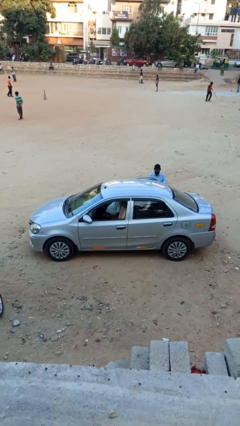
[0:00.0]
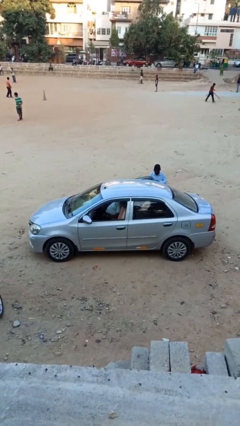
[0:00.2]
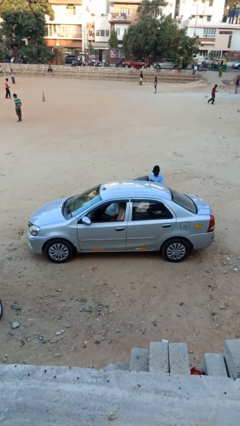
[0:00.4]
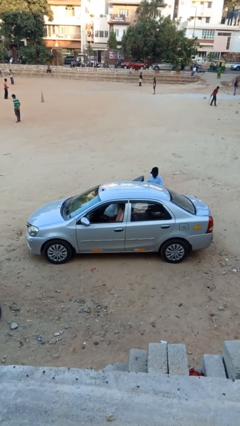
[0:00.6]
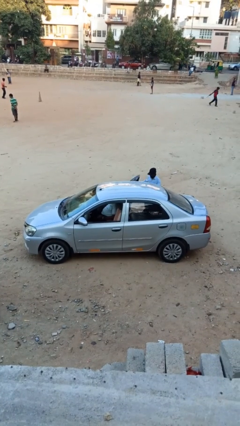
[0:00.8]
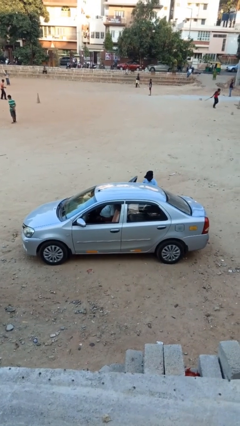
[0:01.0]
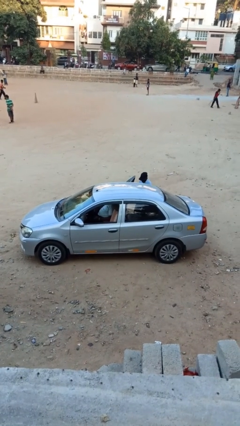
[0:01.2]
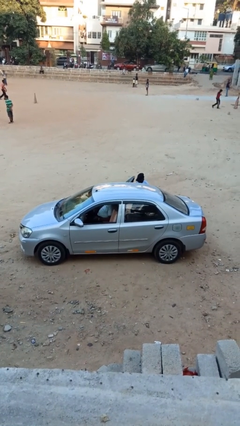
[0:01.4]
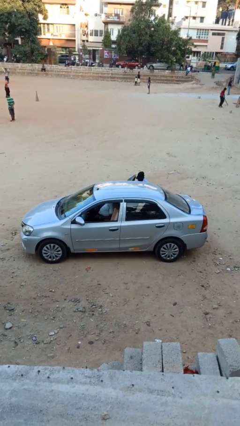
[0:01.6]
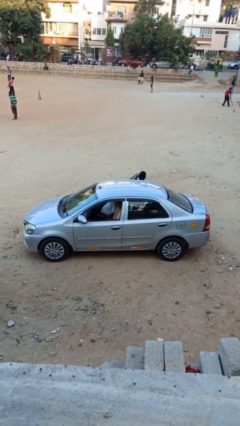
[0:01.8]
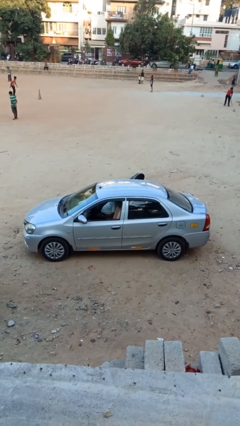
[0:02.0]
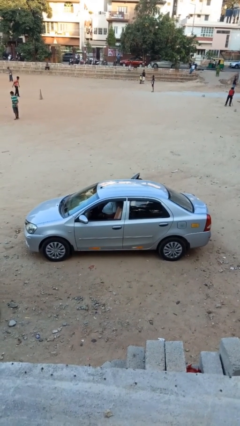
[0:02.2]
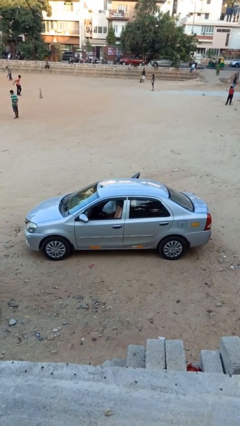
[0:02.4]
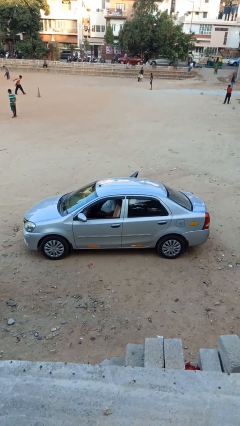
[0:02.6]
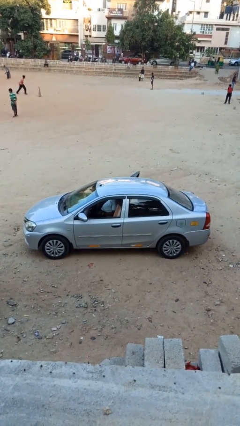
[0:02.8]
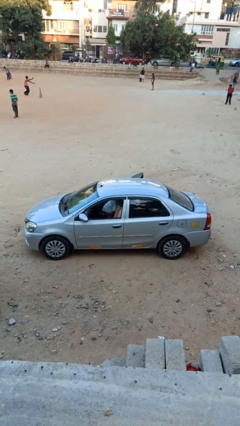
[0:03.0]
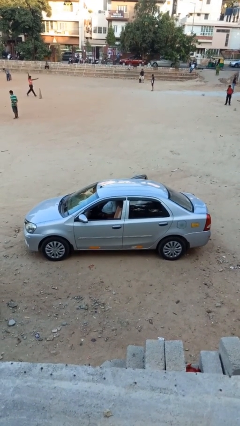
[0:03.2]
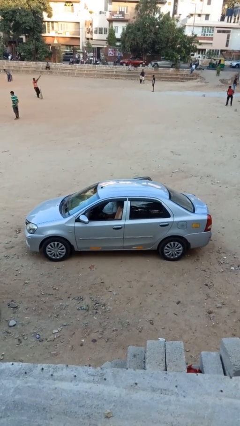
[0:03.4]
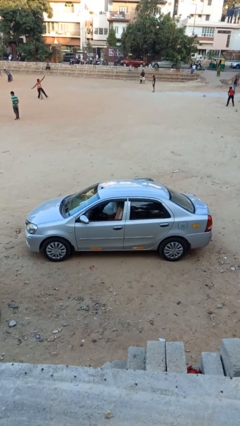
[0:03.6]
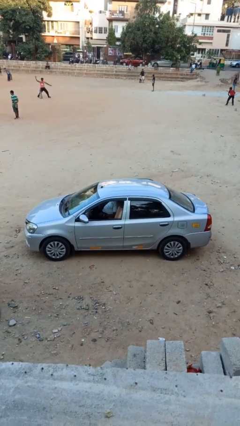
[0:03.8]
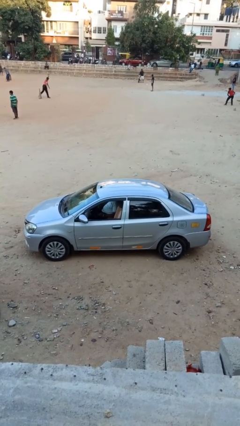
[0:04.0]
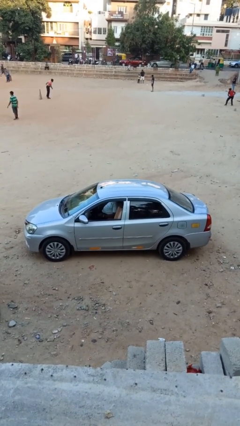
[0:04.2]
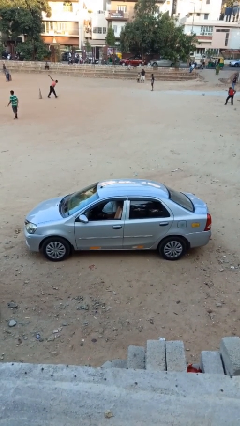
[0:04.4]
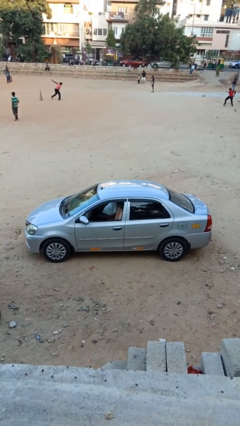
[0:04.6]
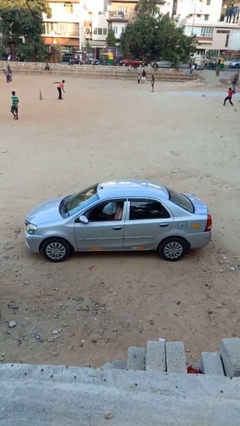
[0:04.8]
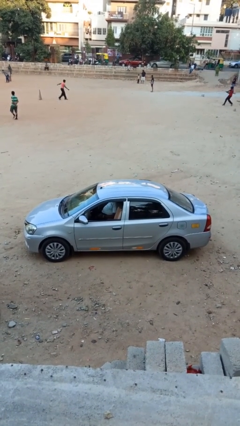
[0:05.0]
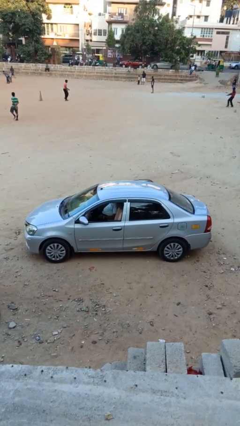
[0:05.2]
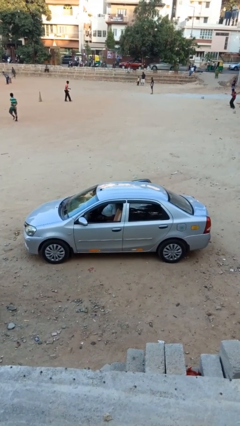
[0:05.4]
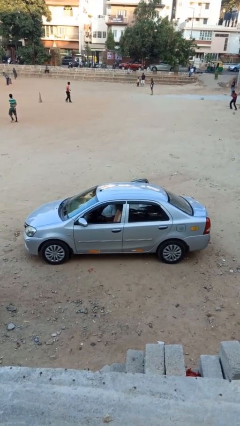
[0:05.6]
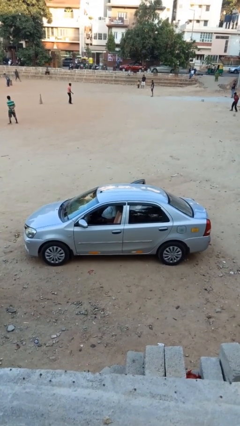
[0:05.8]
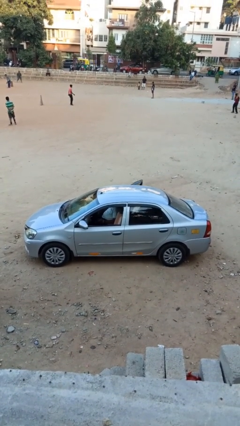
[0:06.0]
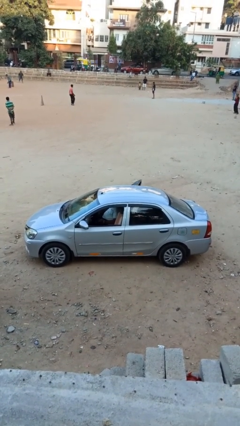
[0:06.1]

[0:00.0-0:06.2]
car picks up person

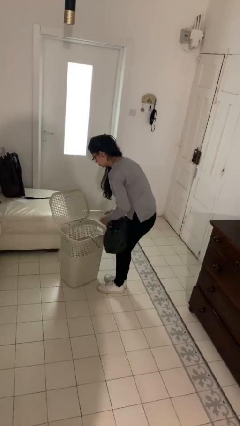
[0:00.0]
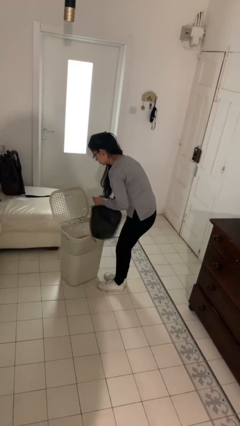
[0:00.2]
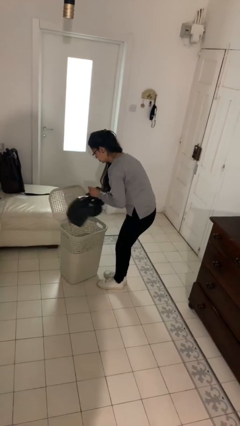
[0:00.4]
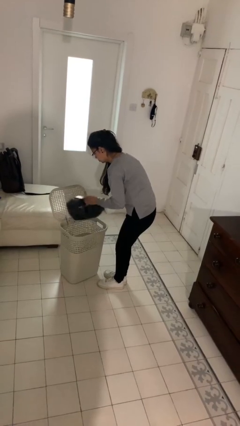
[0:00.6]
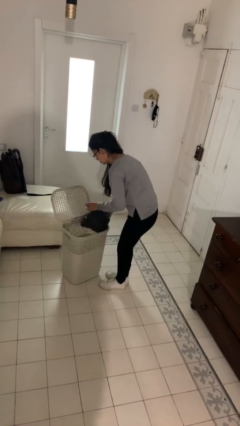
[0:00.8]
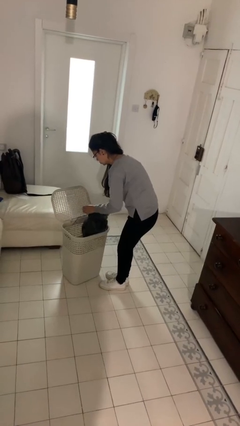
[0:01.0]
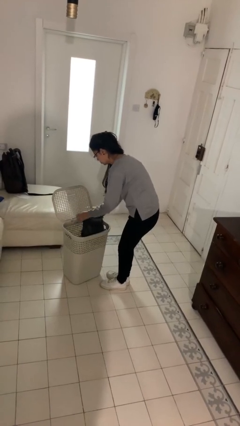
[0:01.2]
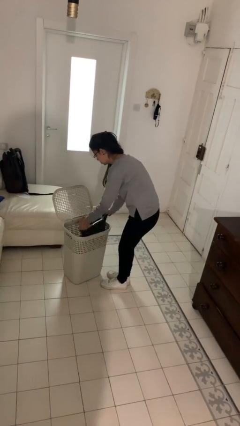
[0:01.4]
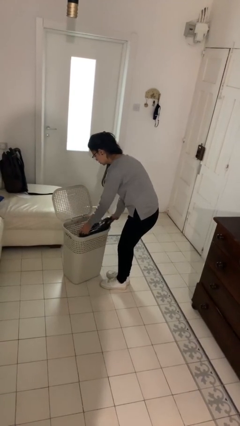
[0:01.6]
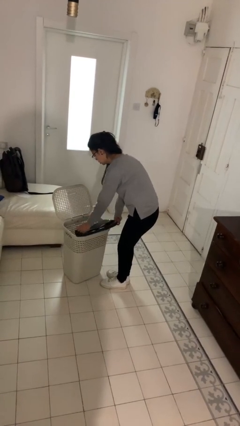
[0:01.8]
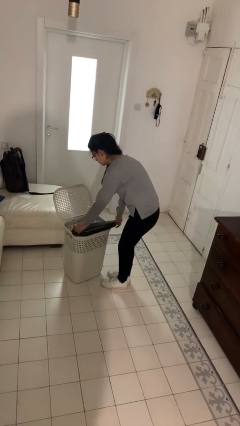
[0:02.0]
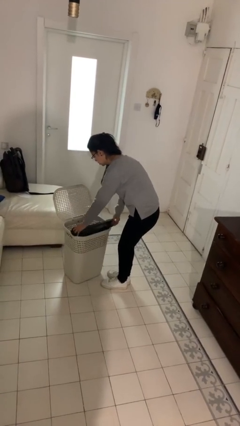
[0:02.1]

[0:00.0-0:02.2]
person inserts trashbag into trashcan

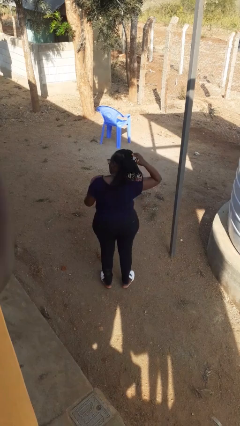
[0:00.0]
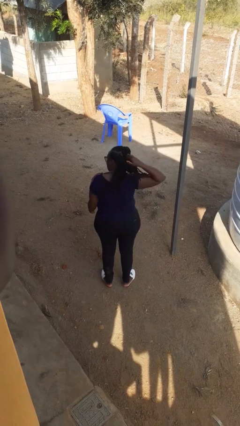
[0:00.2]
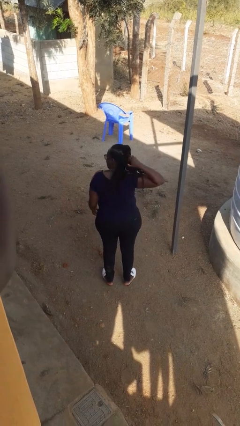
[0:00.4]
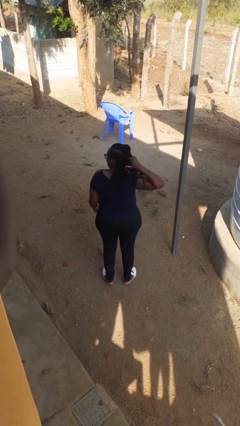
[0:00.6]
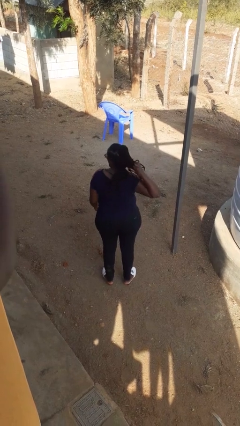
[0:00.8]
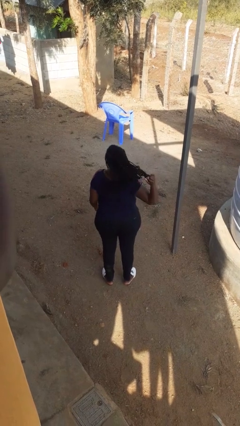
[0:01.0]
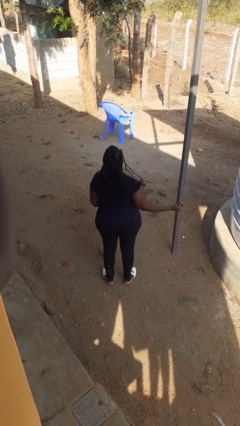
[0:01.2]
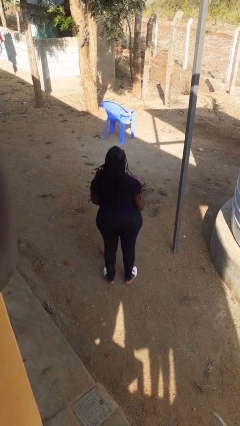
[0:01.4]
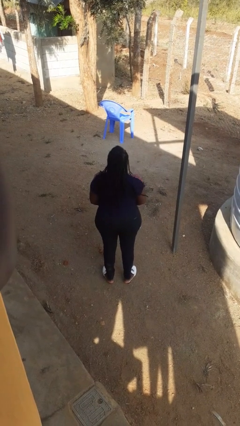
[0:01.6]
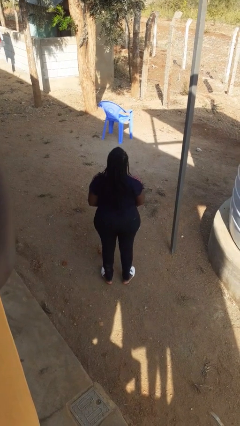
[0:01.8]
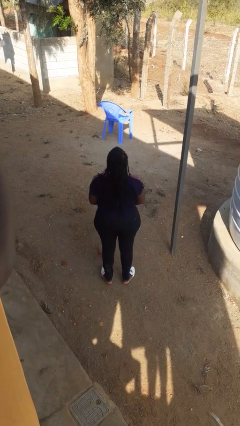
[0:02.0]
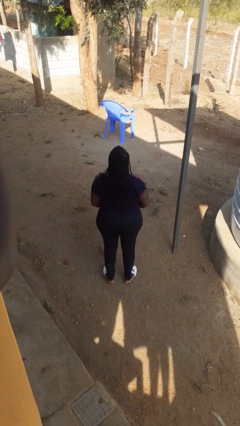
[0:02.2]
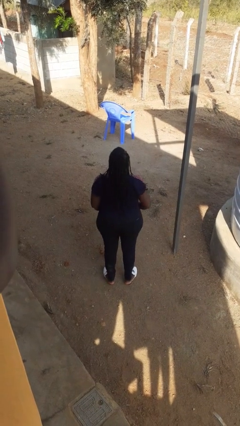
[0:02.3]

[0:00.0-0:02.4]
person puts hair in ponytail

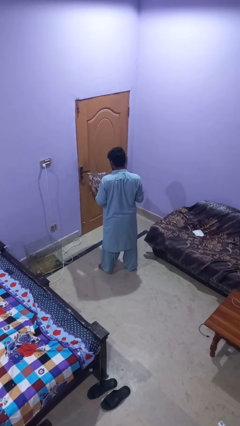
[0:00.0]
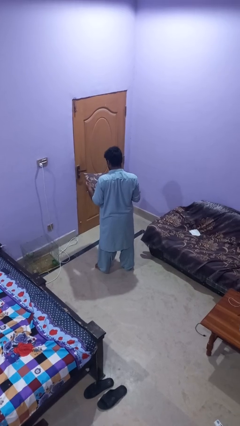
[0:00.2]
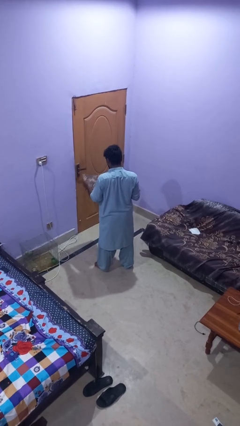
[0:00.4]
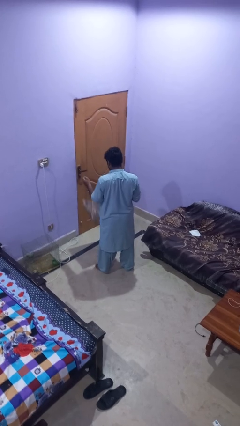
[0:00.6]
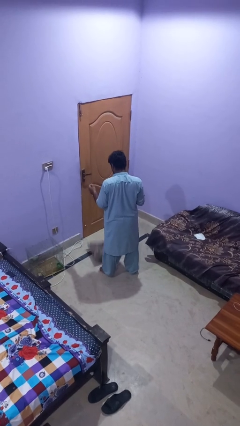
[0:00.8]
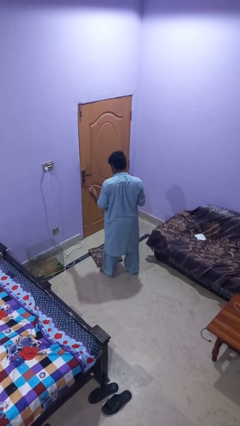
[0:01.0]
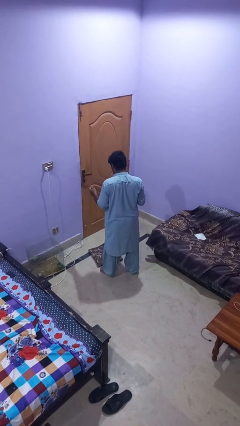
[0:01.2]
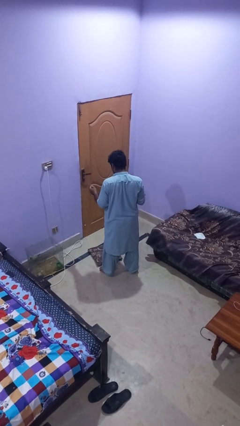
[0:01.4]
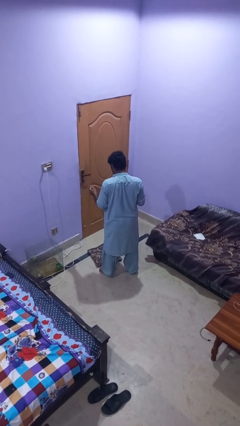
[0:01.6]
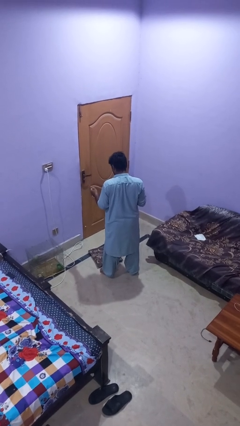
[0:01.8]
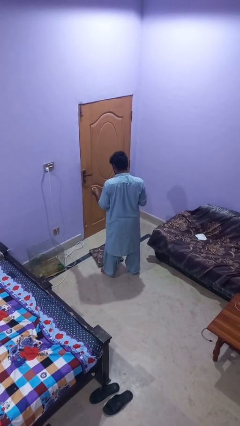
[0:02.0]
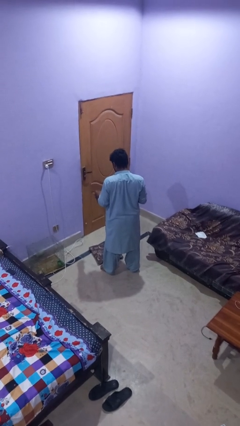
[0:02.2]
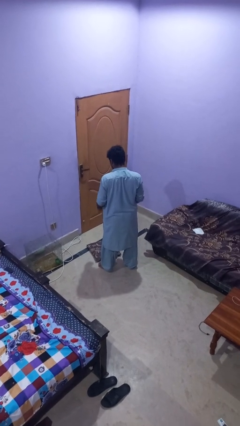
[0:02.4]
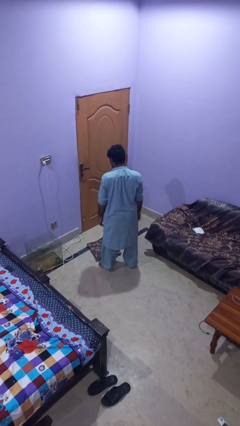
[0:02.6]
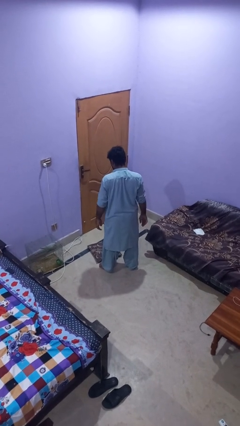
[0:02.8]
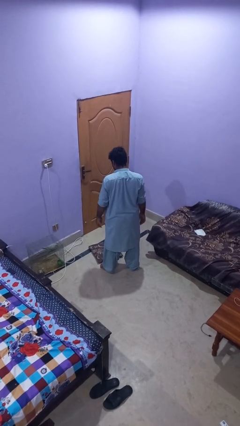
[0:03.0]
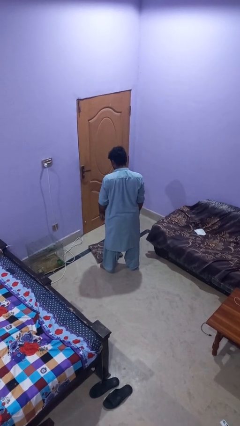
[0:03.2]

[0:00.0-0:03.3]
person drops object

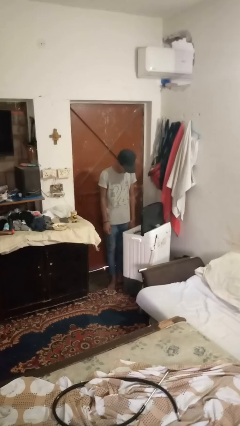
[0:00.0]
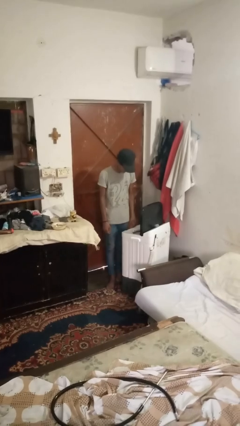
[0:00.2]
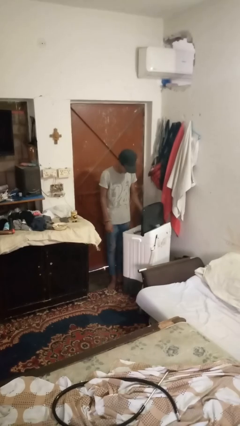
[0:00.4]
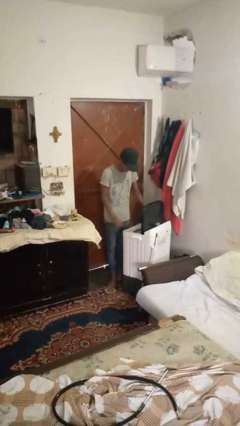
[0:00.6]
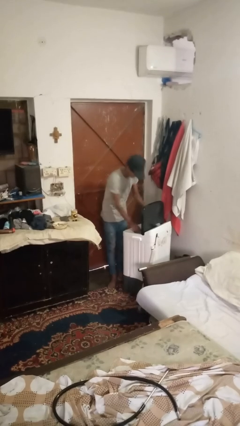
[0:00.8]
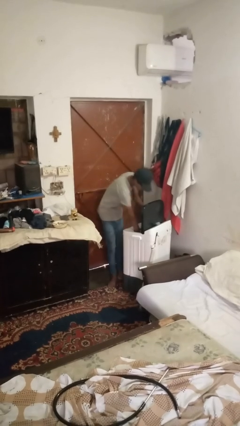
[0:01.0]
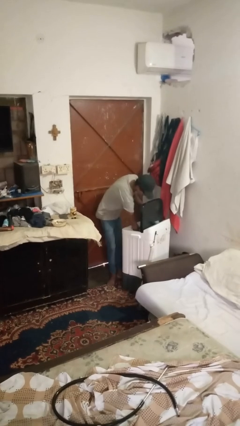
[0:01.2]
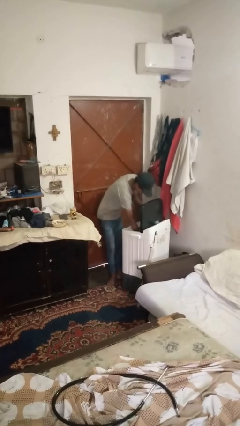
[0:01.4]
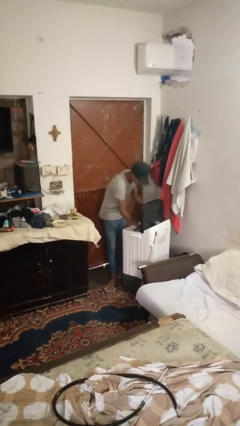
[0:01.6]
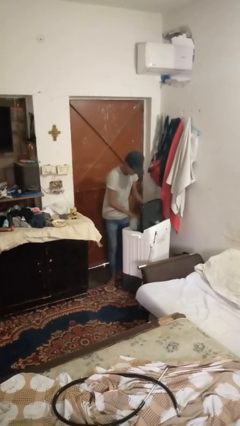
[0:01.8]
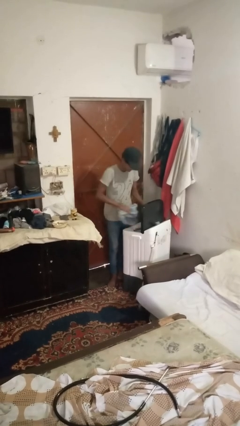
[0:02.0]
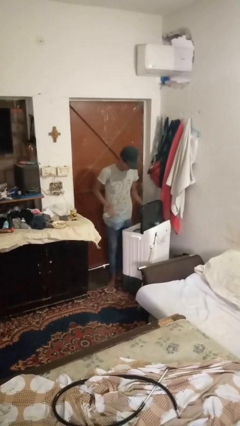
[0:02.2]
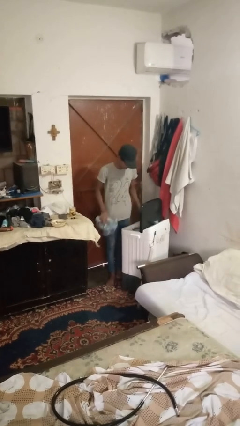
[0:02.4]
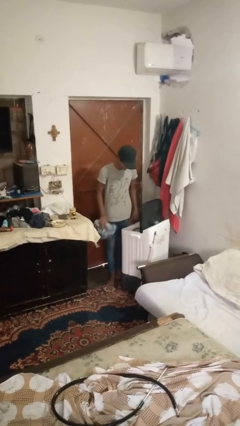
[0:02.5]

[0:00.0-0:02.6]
person unloads clotheswasher

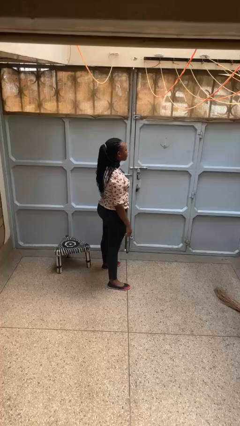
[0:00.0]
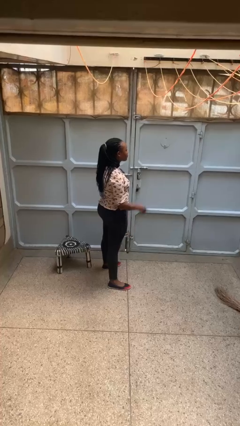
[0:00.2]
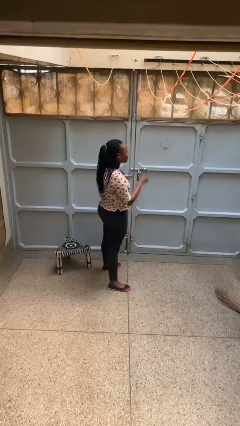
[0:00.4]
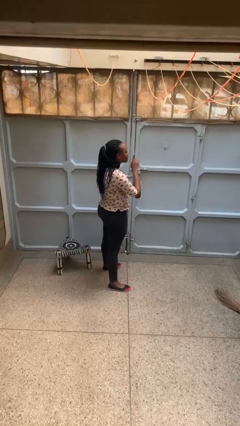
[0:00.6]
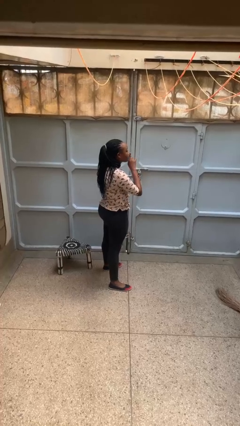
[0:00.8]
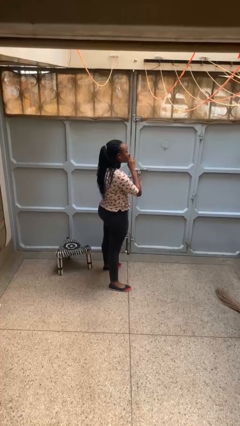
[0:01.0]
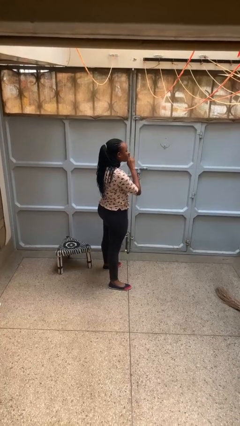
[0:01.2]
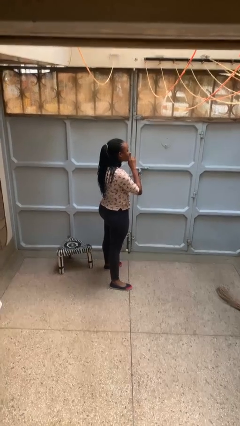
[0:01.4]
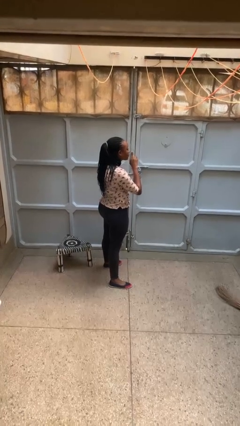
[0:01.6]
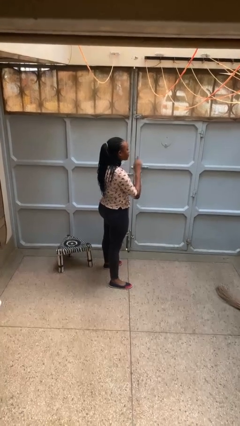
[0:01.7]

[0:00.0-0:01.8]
person gestures be quiet
